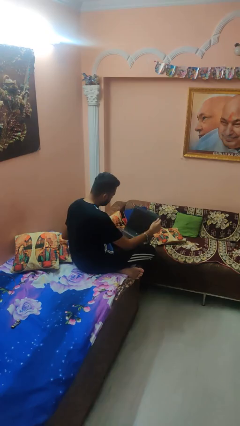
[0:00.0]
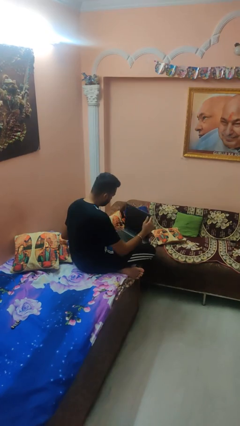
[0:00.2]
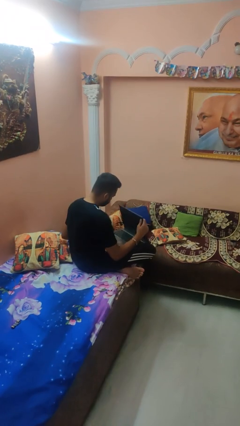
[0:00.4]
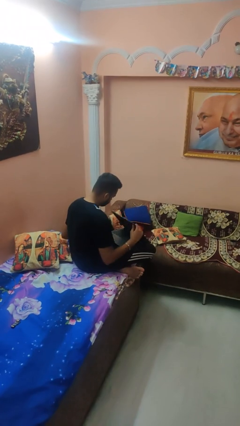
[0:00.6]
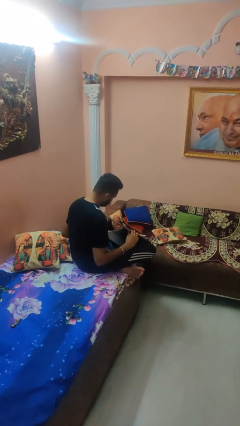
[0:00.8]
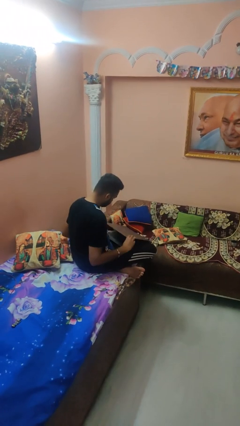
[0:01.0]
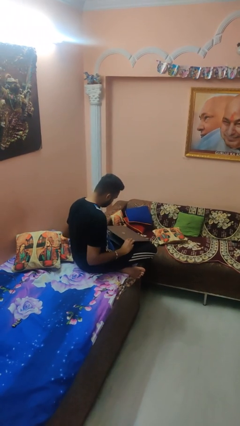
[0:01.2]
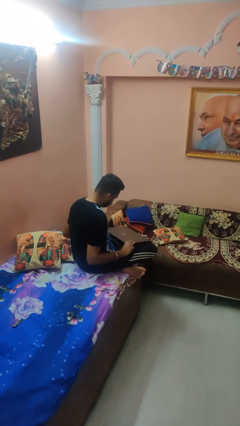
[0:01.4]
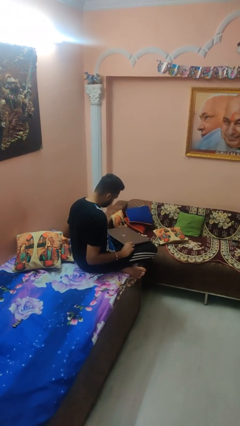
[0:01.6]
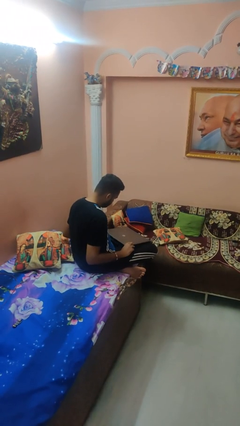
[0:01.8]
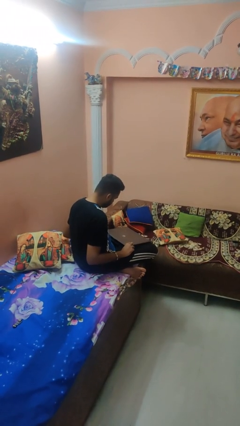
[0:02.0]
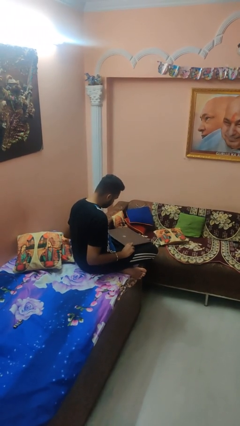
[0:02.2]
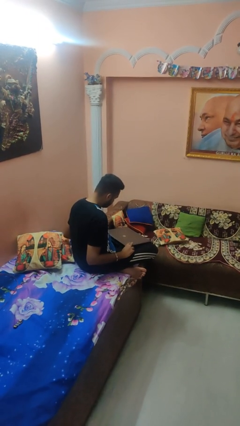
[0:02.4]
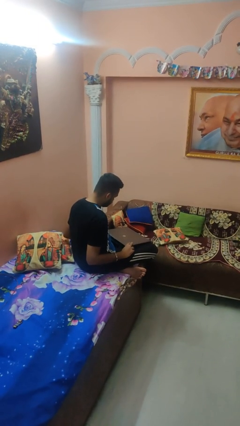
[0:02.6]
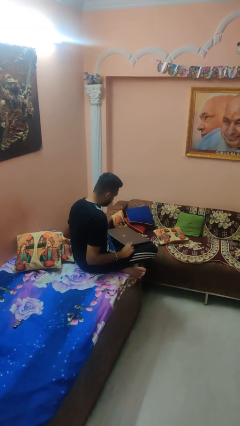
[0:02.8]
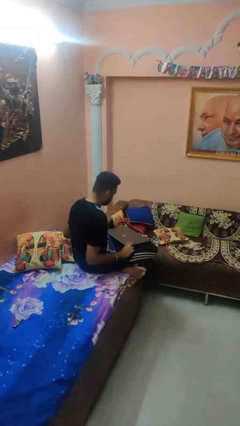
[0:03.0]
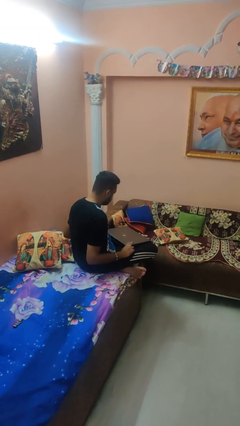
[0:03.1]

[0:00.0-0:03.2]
person closes laptop

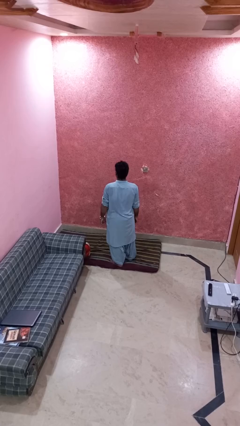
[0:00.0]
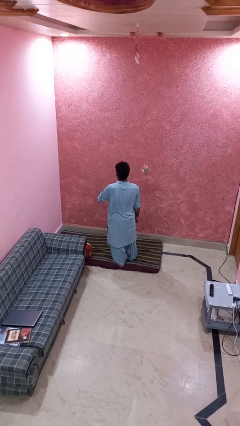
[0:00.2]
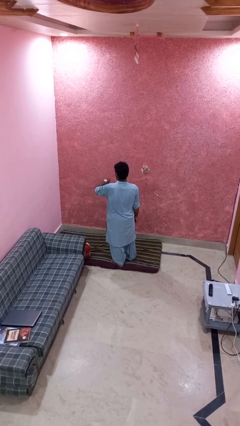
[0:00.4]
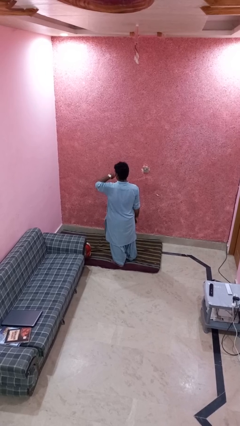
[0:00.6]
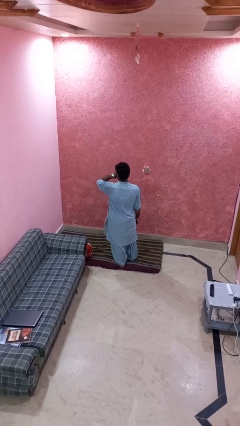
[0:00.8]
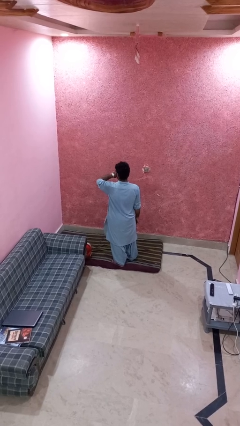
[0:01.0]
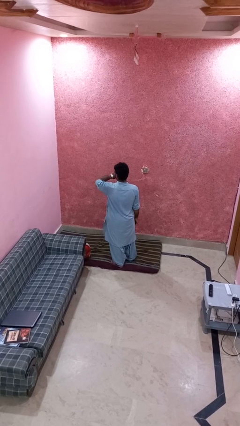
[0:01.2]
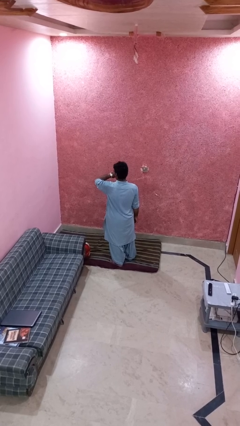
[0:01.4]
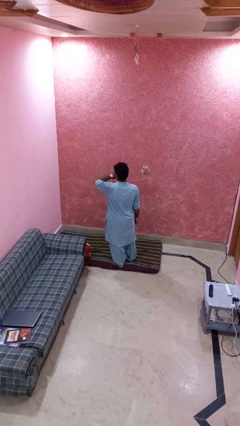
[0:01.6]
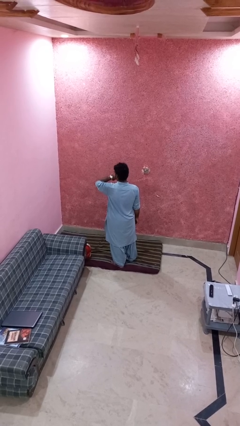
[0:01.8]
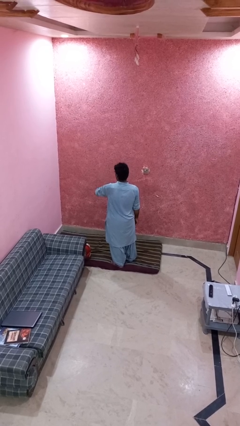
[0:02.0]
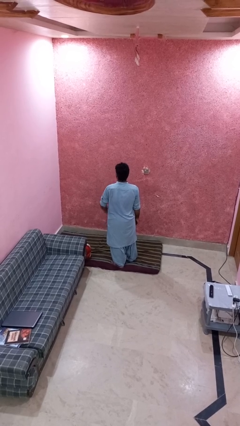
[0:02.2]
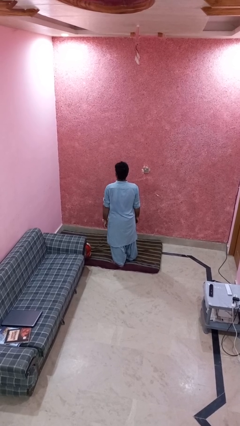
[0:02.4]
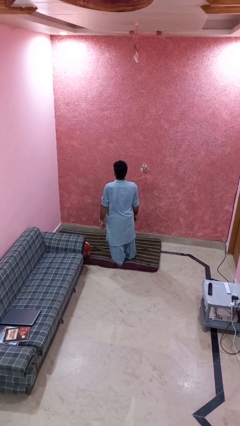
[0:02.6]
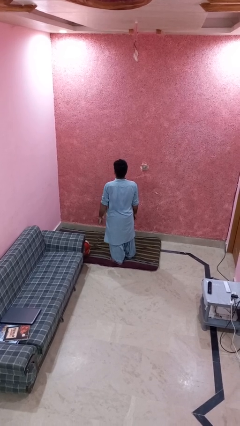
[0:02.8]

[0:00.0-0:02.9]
person looks at wristwatch

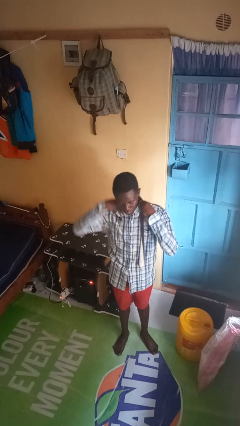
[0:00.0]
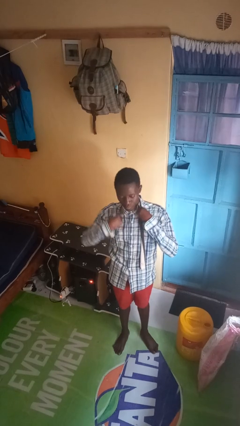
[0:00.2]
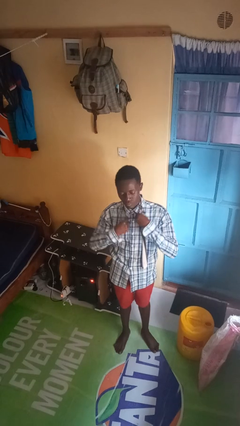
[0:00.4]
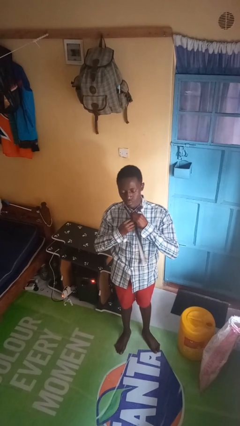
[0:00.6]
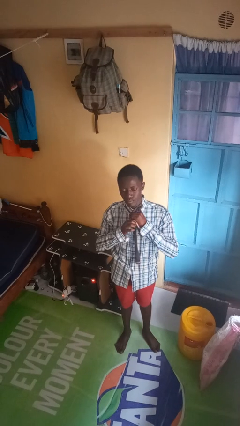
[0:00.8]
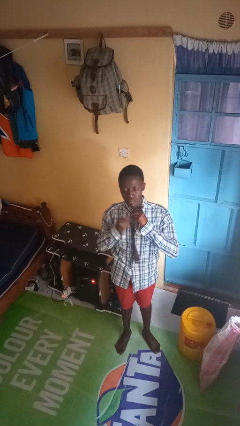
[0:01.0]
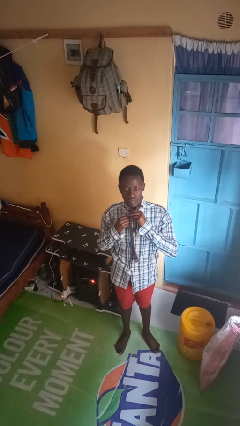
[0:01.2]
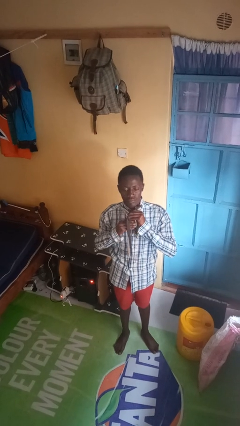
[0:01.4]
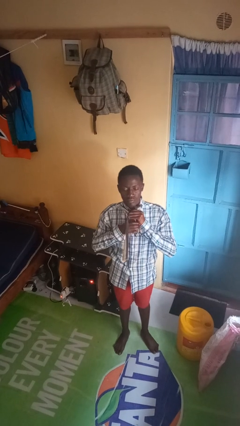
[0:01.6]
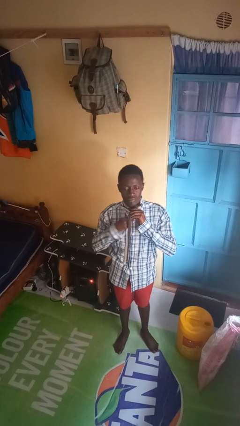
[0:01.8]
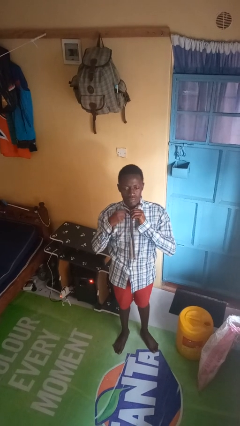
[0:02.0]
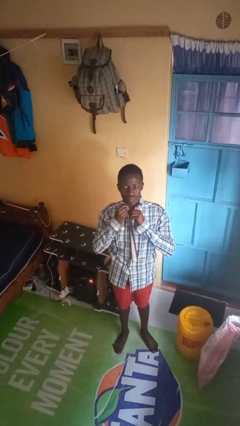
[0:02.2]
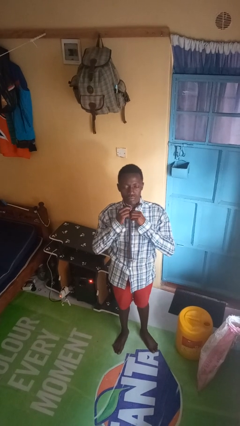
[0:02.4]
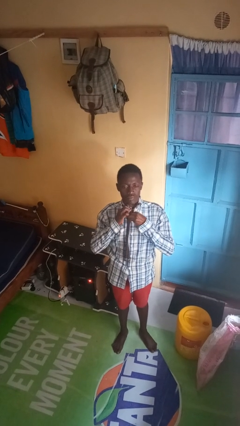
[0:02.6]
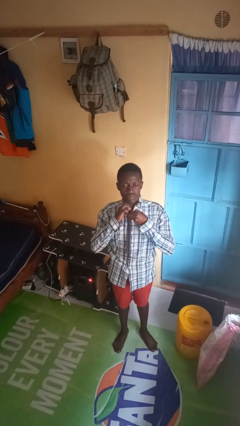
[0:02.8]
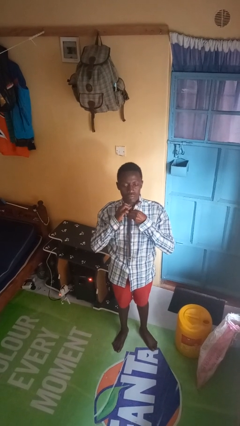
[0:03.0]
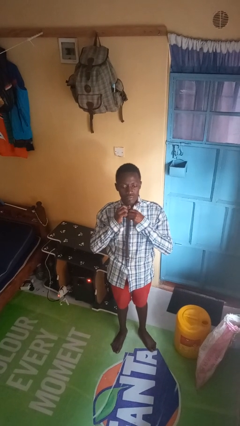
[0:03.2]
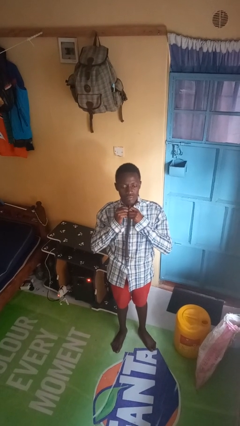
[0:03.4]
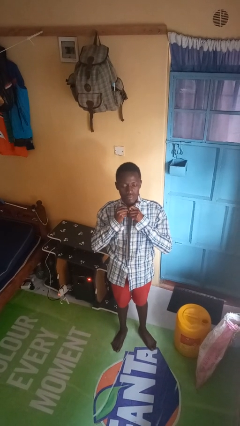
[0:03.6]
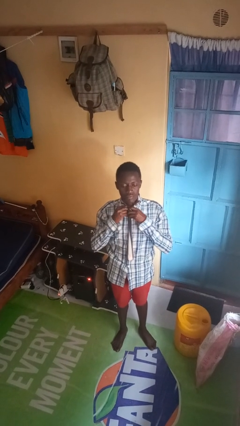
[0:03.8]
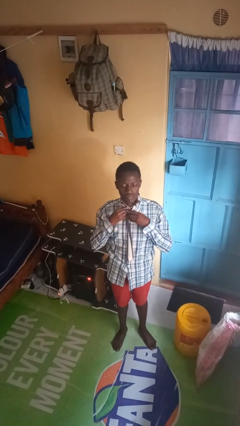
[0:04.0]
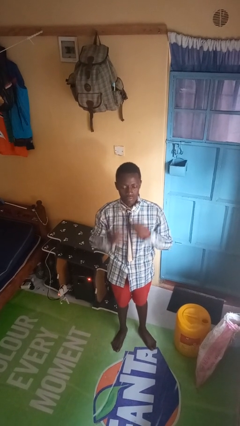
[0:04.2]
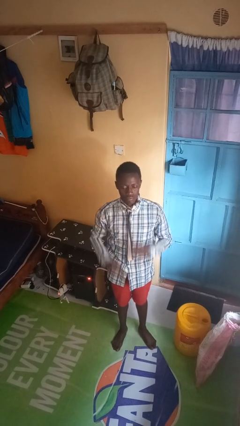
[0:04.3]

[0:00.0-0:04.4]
person puts on necktie

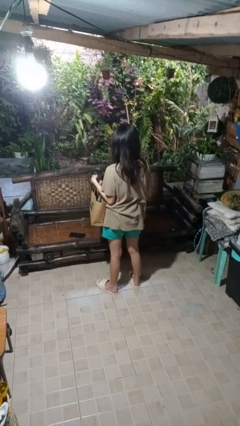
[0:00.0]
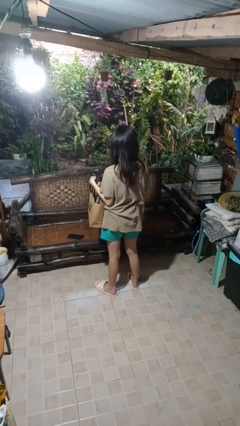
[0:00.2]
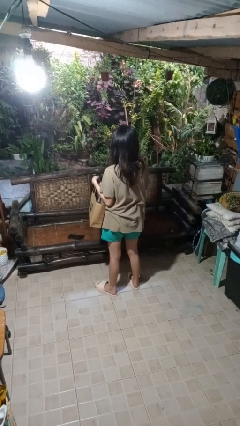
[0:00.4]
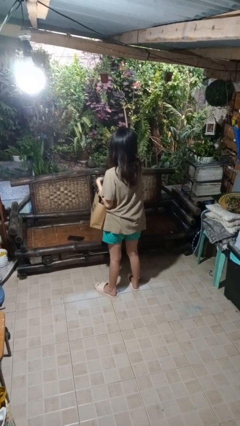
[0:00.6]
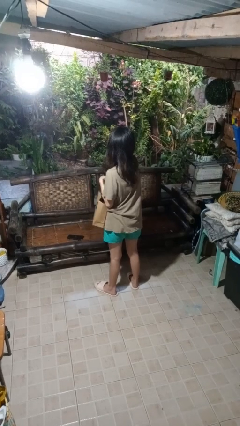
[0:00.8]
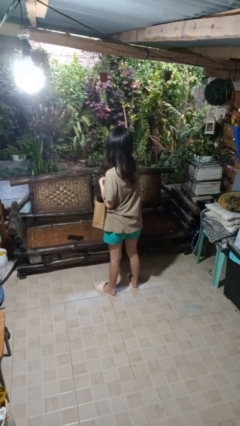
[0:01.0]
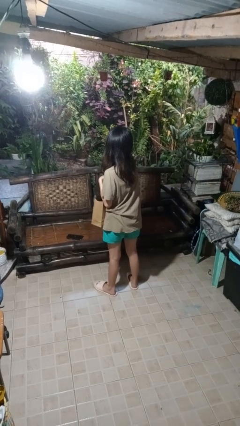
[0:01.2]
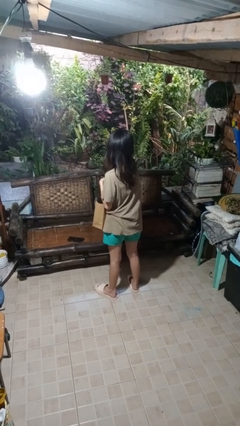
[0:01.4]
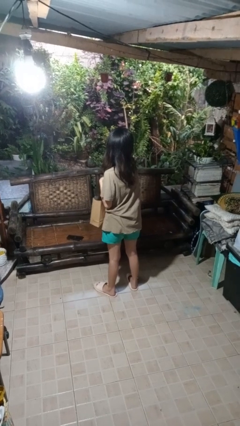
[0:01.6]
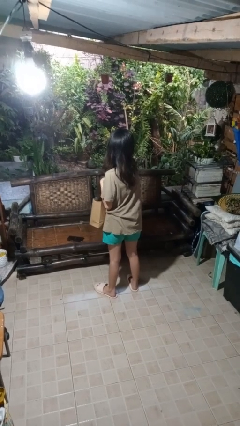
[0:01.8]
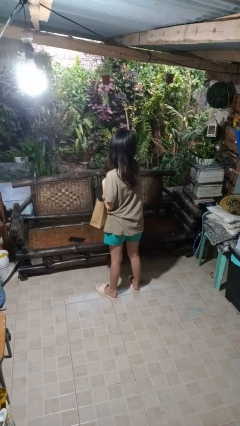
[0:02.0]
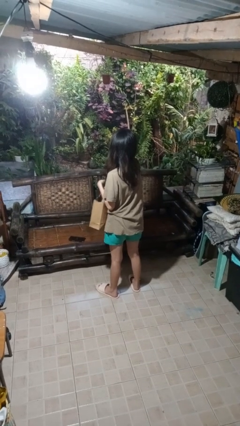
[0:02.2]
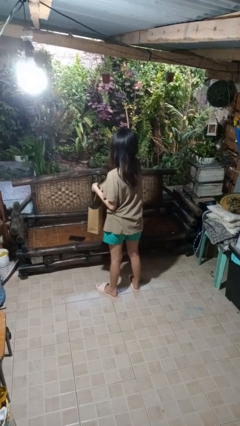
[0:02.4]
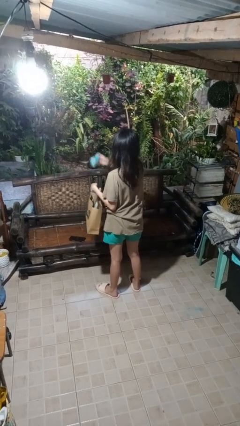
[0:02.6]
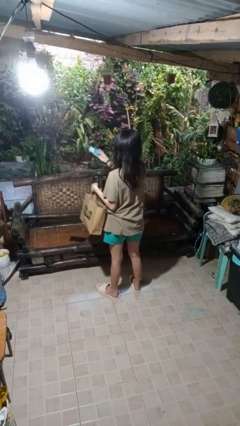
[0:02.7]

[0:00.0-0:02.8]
person takes object from bag

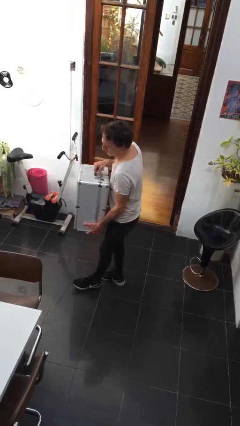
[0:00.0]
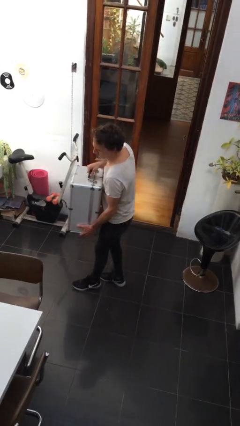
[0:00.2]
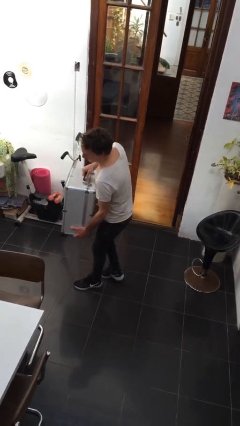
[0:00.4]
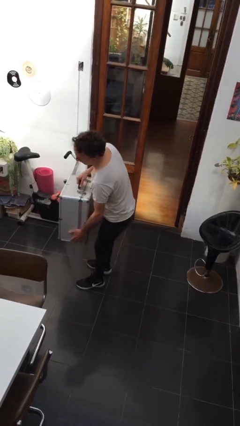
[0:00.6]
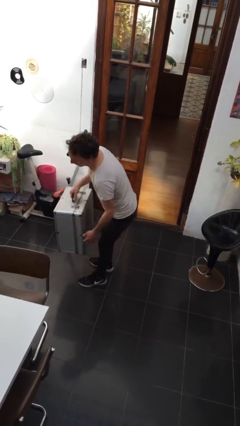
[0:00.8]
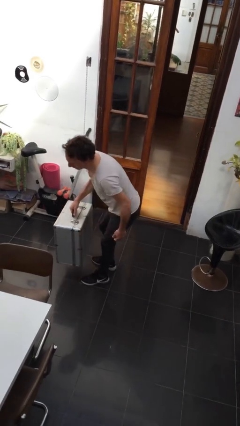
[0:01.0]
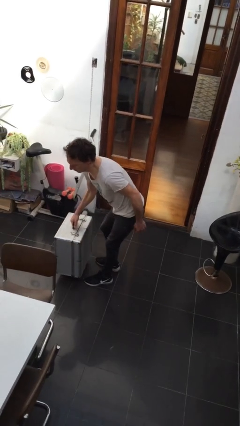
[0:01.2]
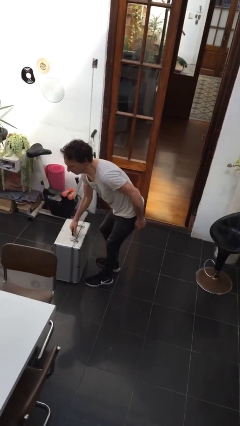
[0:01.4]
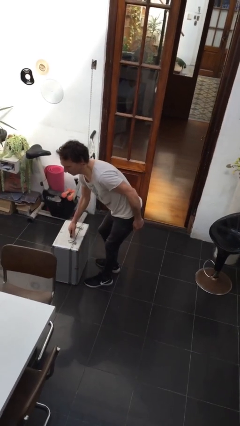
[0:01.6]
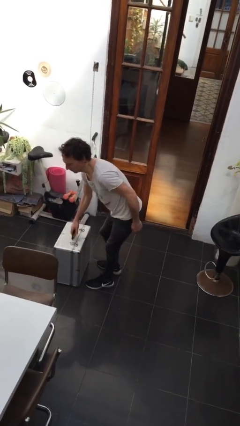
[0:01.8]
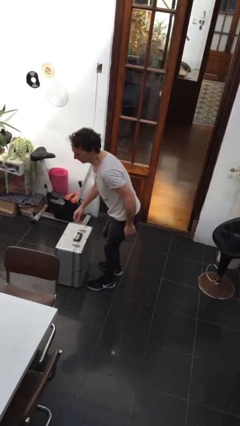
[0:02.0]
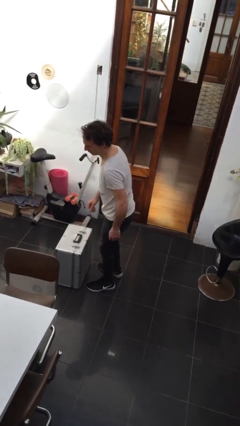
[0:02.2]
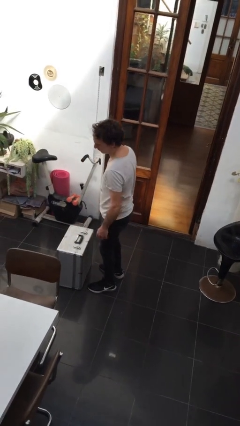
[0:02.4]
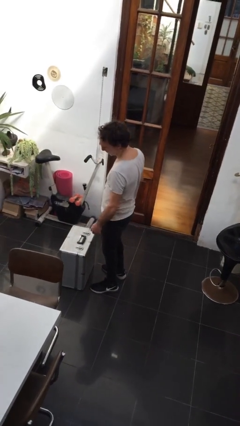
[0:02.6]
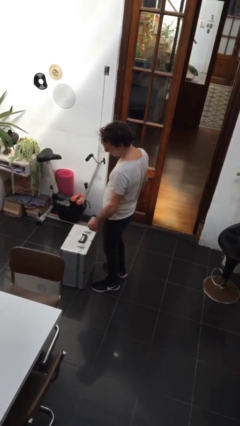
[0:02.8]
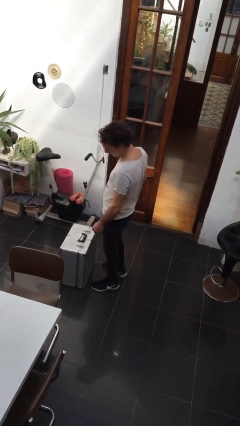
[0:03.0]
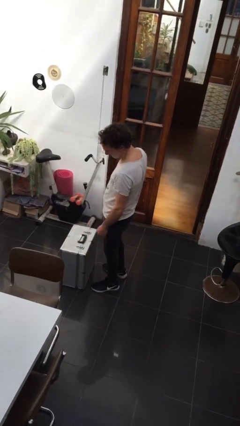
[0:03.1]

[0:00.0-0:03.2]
person puts down object on floor

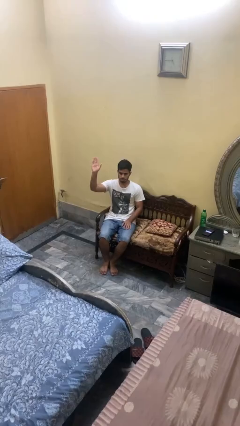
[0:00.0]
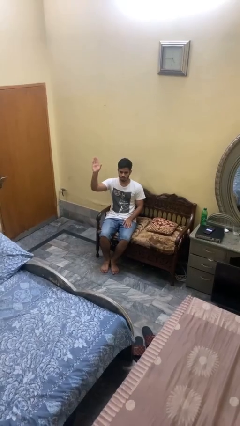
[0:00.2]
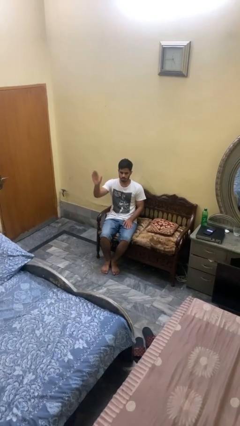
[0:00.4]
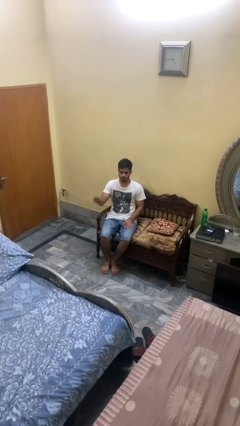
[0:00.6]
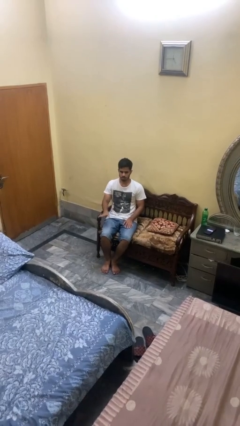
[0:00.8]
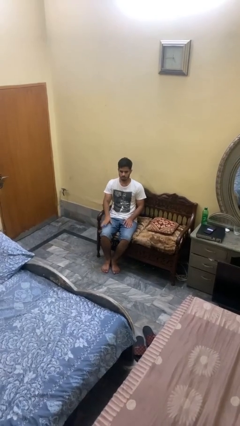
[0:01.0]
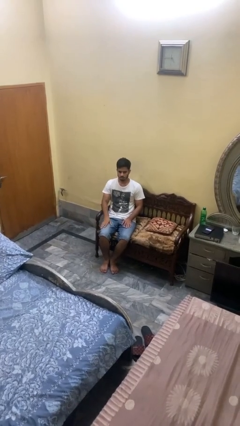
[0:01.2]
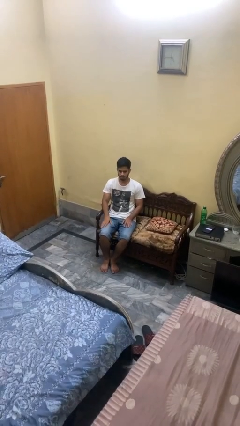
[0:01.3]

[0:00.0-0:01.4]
person gestures lower hand
